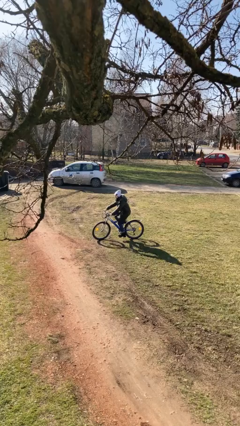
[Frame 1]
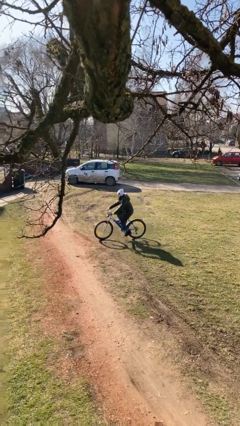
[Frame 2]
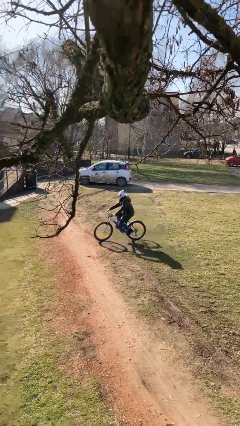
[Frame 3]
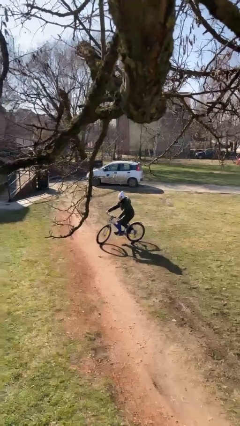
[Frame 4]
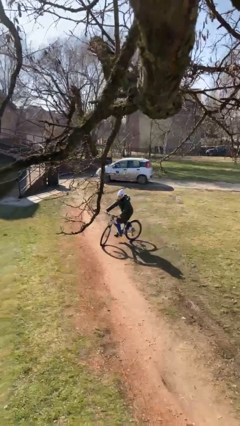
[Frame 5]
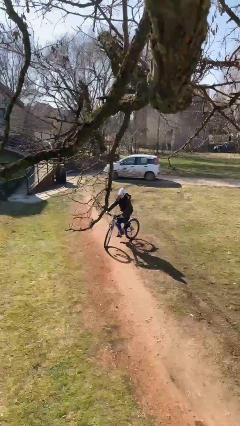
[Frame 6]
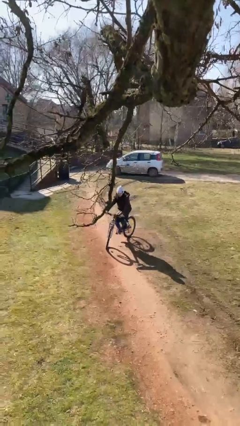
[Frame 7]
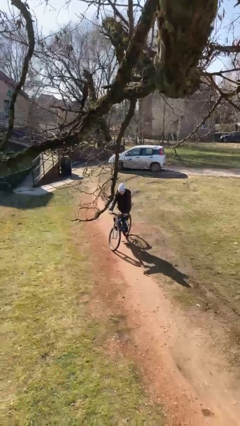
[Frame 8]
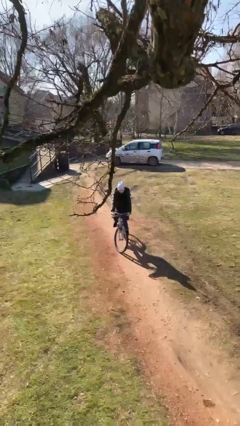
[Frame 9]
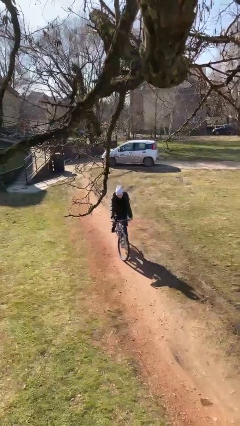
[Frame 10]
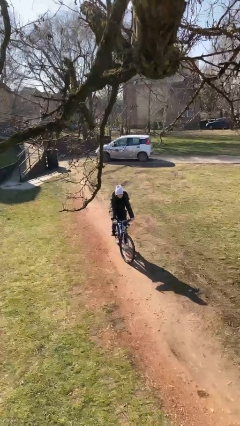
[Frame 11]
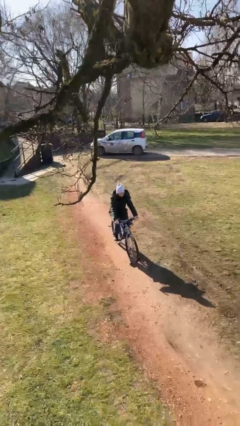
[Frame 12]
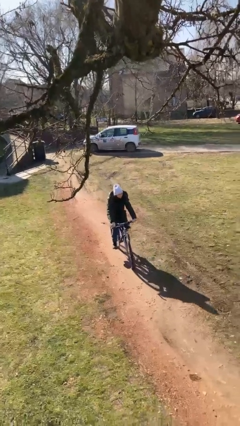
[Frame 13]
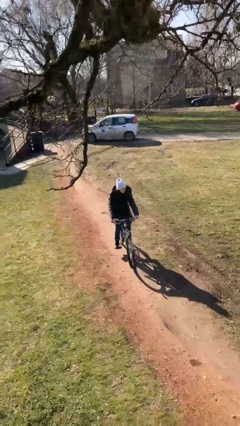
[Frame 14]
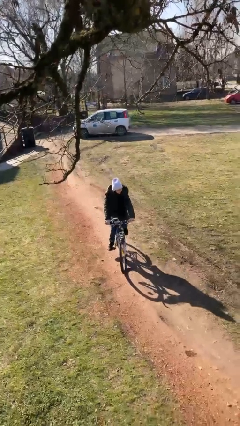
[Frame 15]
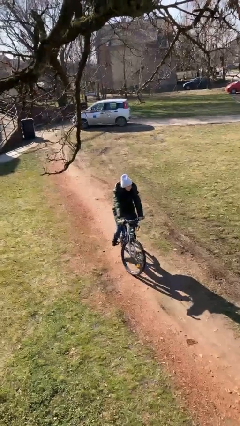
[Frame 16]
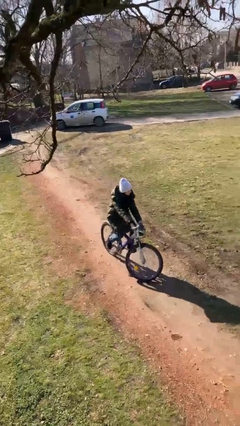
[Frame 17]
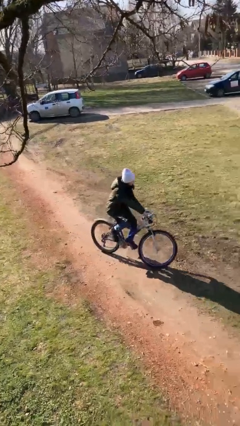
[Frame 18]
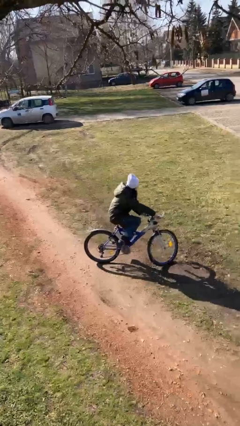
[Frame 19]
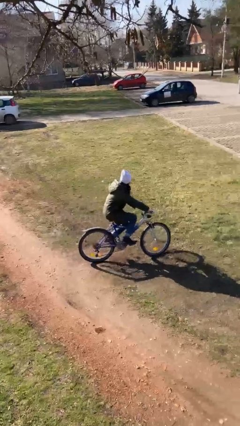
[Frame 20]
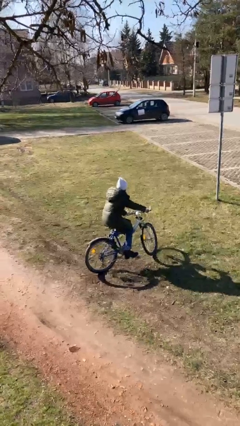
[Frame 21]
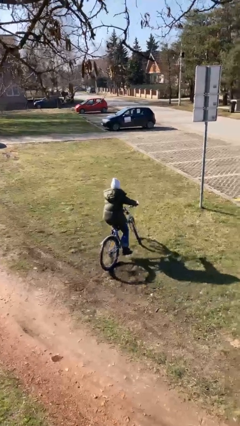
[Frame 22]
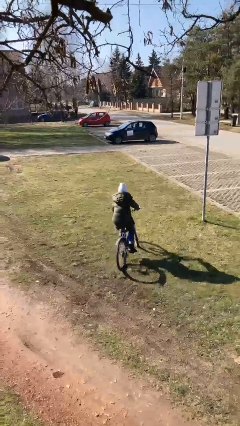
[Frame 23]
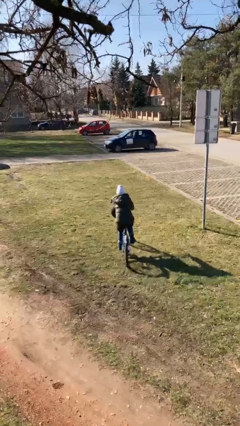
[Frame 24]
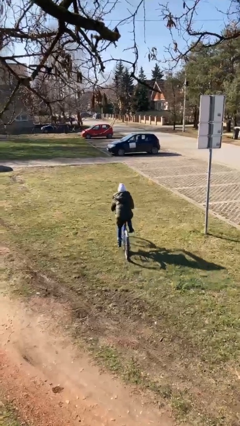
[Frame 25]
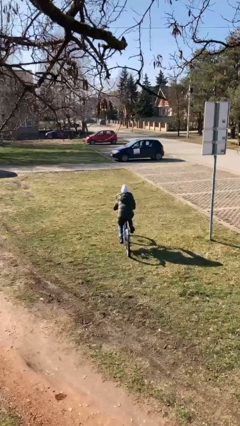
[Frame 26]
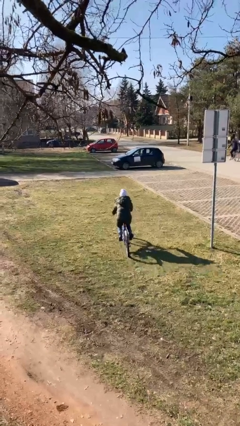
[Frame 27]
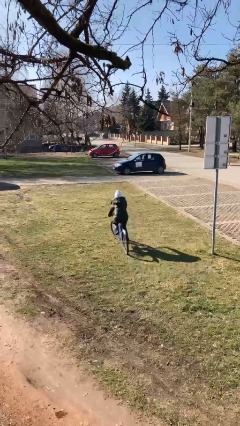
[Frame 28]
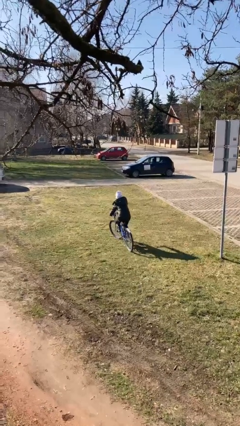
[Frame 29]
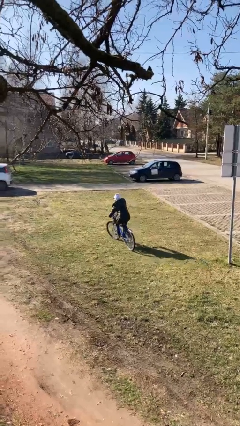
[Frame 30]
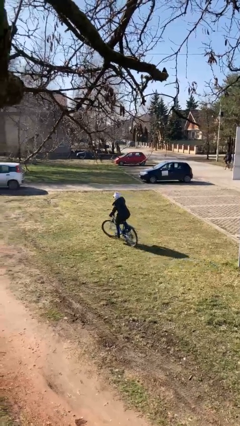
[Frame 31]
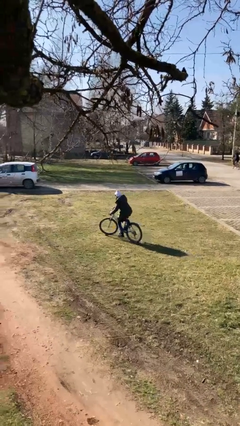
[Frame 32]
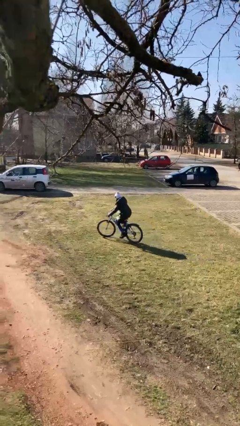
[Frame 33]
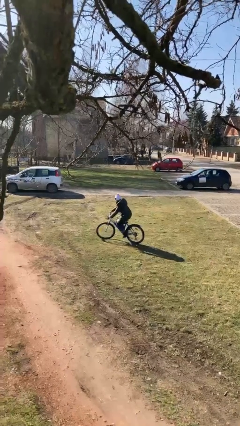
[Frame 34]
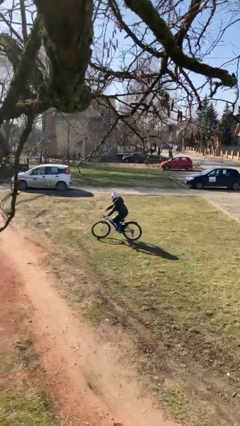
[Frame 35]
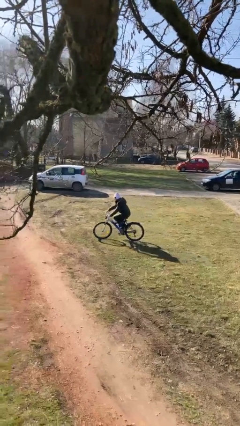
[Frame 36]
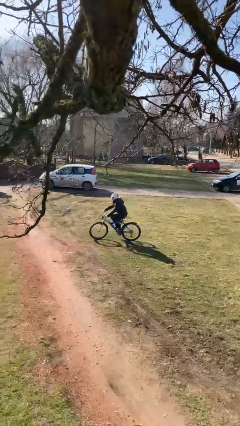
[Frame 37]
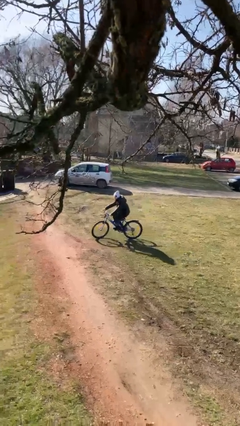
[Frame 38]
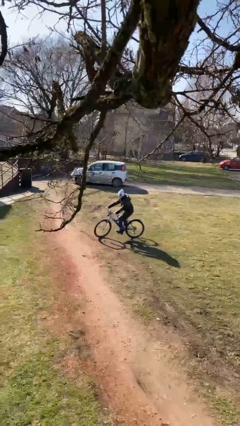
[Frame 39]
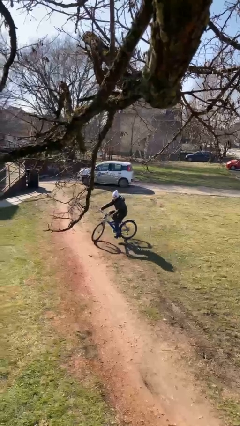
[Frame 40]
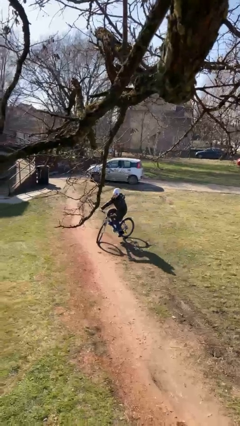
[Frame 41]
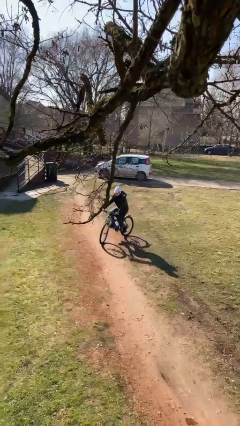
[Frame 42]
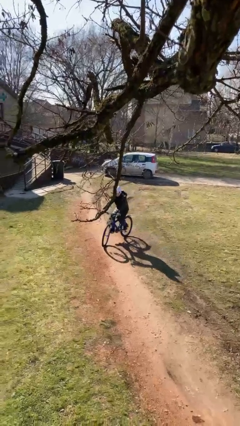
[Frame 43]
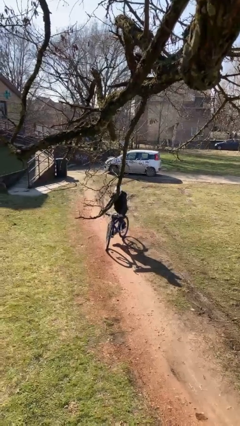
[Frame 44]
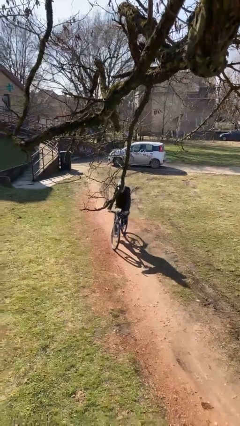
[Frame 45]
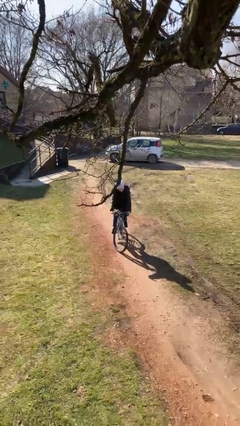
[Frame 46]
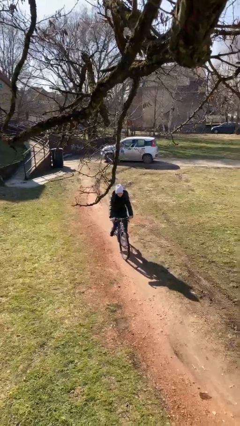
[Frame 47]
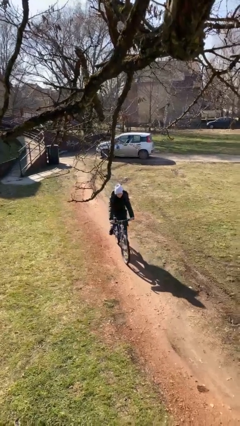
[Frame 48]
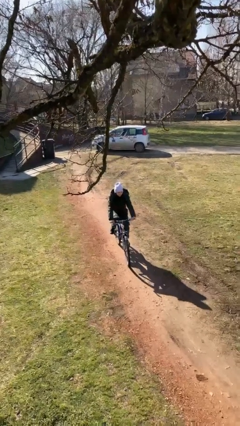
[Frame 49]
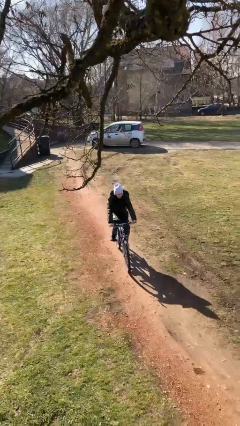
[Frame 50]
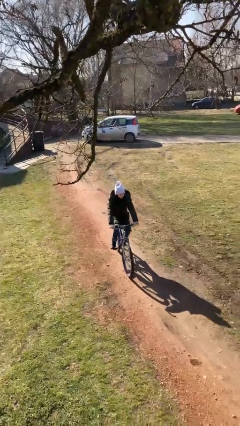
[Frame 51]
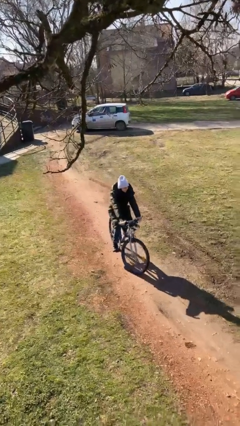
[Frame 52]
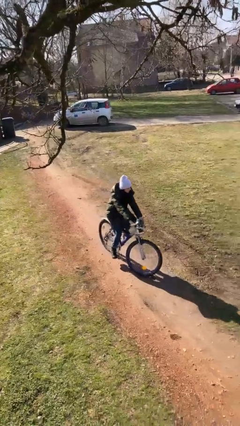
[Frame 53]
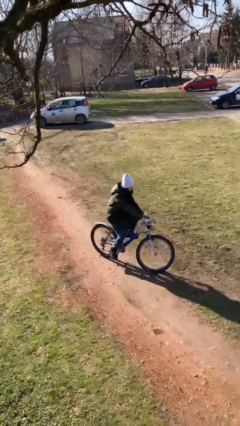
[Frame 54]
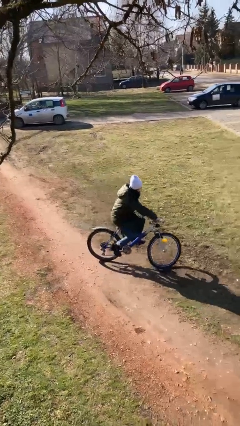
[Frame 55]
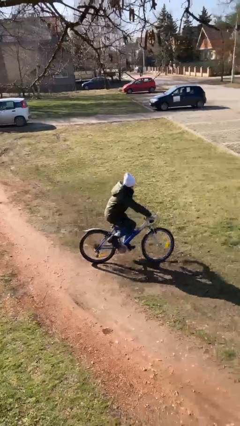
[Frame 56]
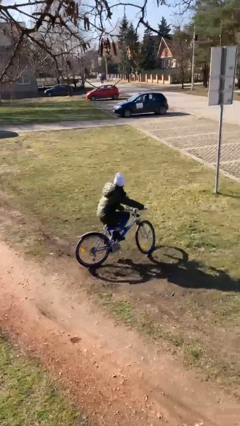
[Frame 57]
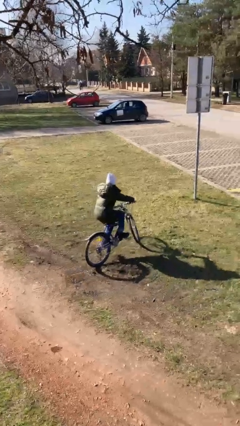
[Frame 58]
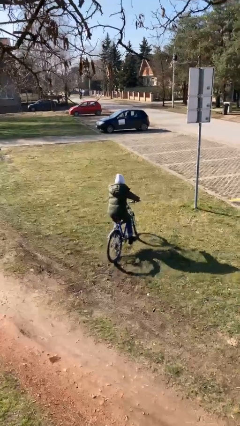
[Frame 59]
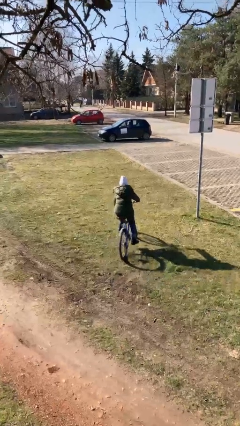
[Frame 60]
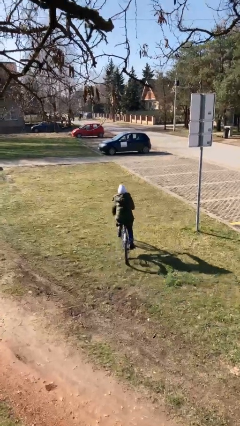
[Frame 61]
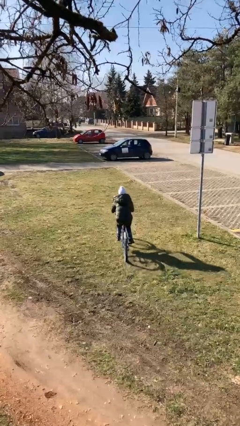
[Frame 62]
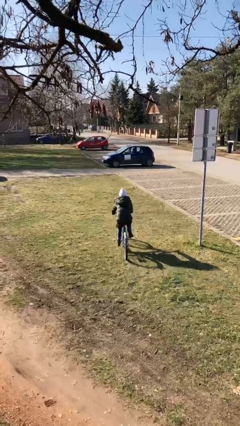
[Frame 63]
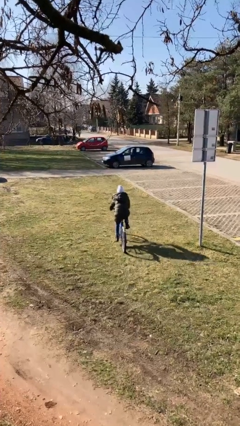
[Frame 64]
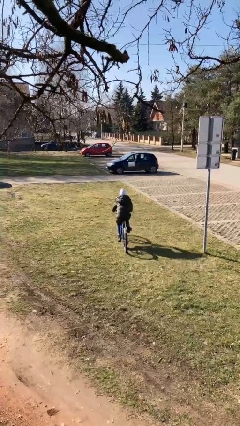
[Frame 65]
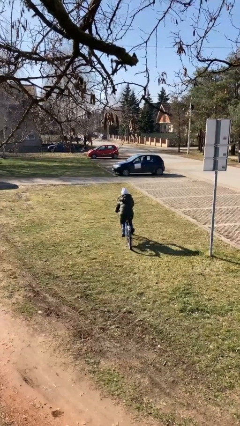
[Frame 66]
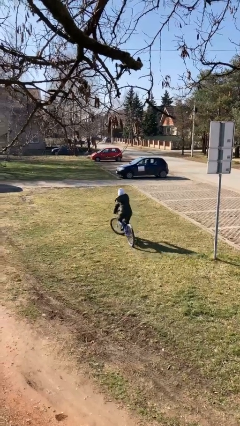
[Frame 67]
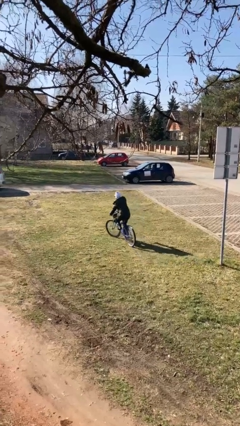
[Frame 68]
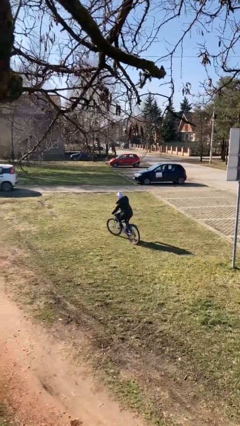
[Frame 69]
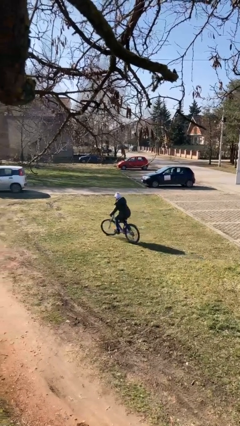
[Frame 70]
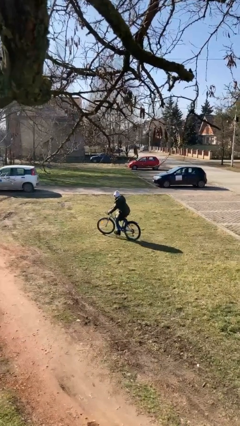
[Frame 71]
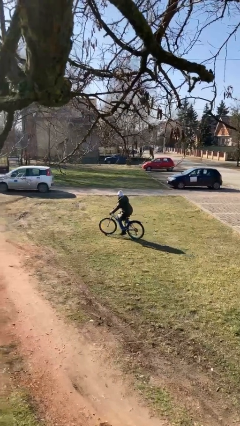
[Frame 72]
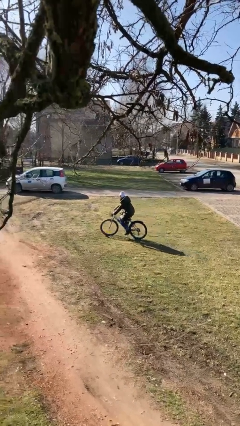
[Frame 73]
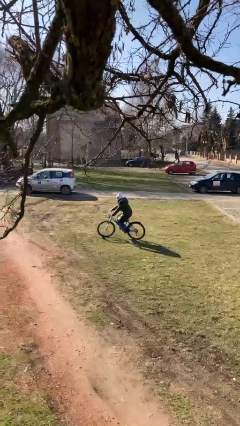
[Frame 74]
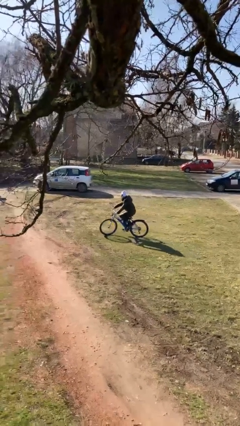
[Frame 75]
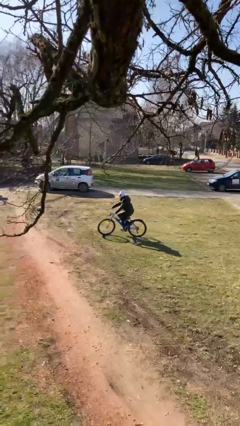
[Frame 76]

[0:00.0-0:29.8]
person rides bicycle

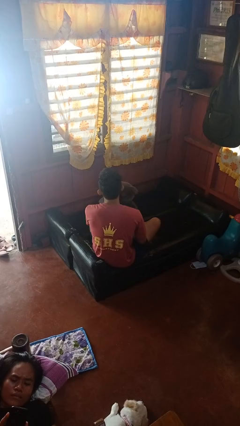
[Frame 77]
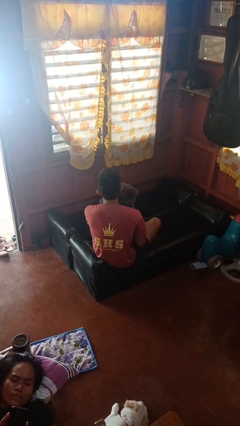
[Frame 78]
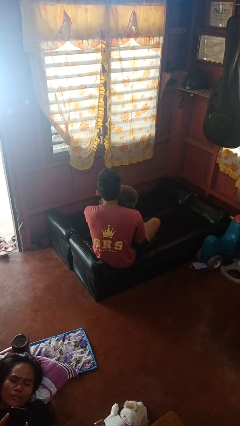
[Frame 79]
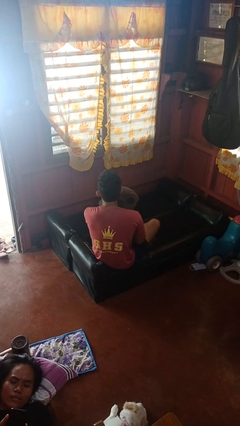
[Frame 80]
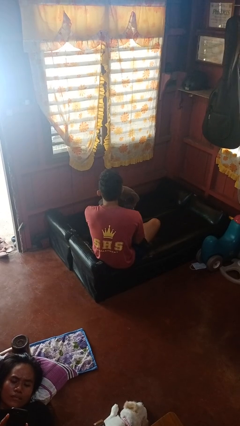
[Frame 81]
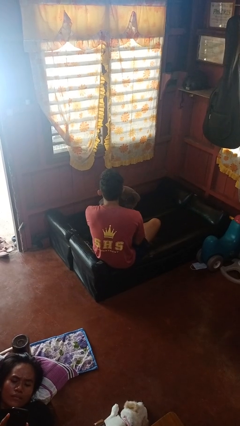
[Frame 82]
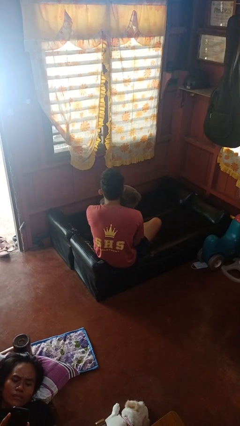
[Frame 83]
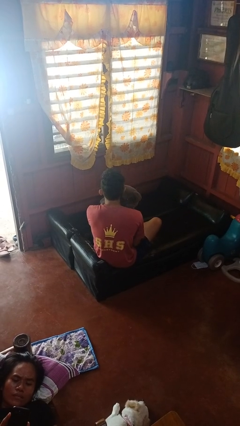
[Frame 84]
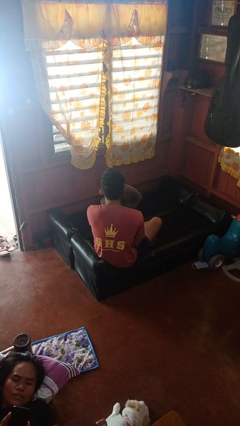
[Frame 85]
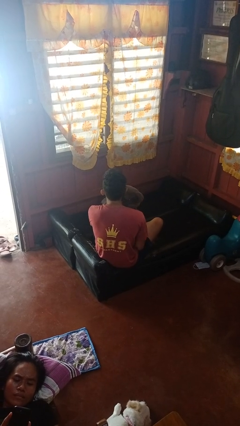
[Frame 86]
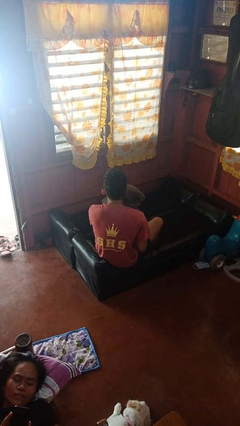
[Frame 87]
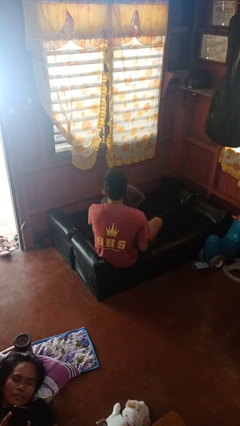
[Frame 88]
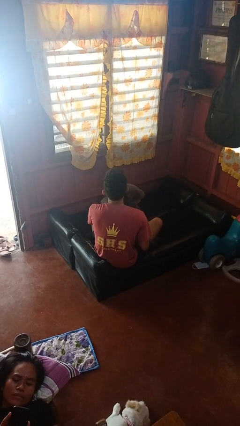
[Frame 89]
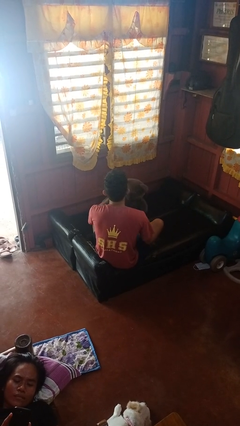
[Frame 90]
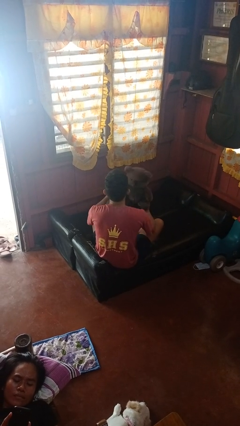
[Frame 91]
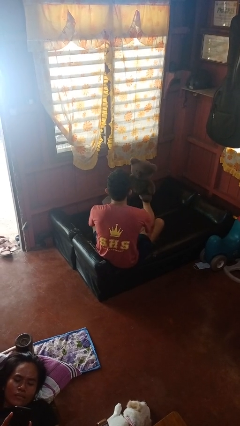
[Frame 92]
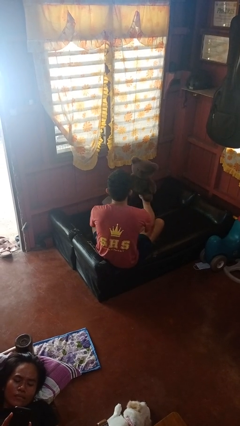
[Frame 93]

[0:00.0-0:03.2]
person hugs stuffed animal

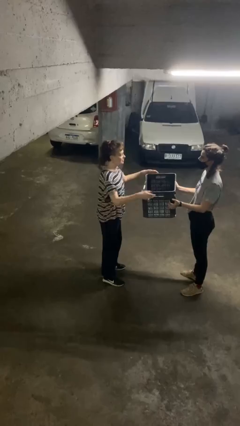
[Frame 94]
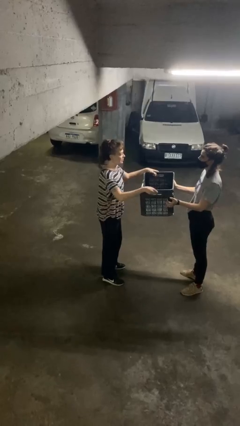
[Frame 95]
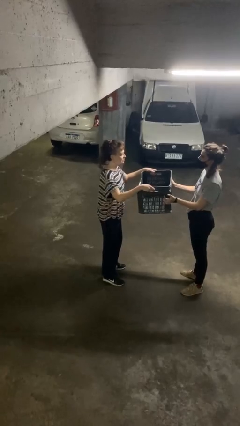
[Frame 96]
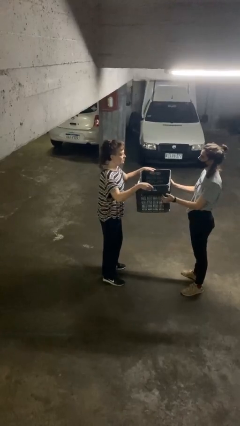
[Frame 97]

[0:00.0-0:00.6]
person transfers object to person
